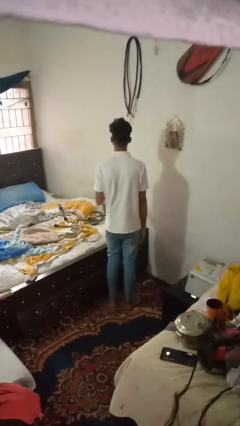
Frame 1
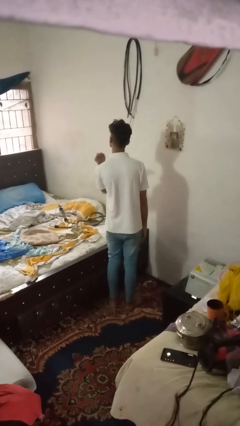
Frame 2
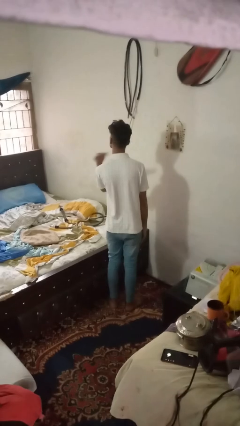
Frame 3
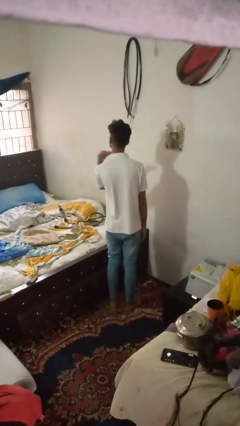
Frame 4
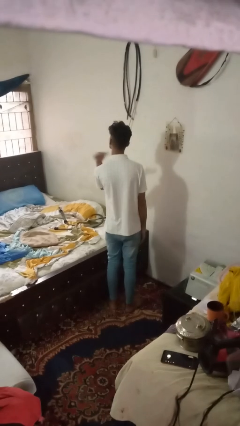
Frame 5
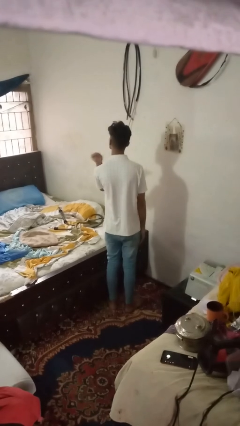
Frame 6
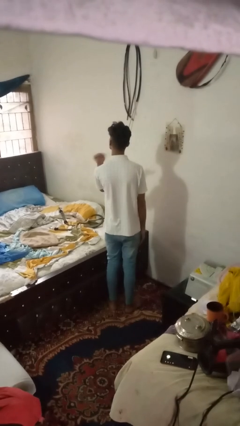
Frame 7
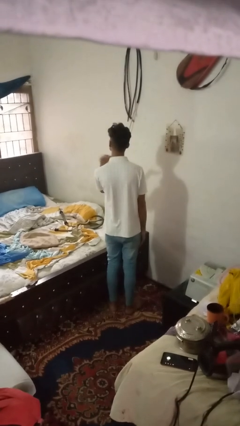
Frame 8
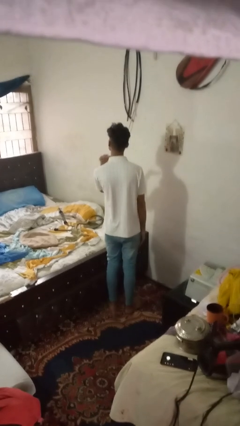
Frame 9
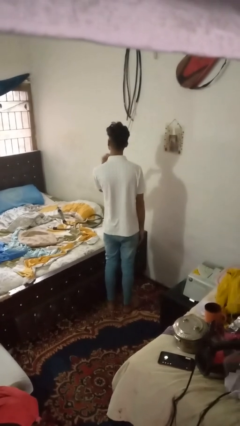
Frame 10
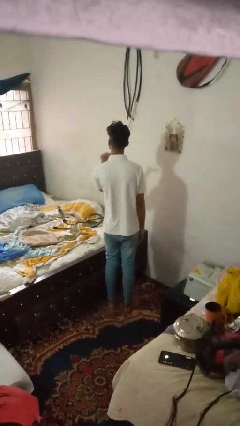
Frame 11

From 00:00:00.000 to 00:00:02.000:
person gestures cut

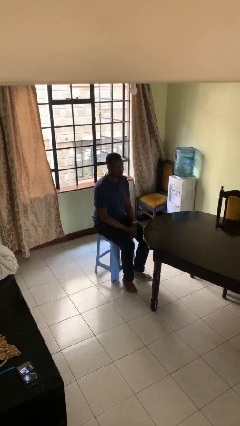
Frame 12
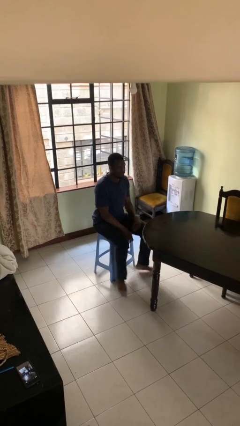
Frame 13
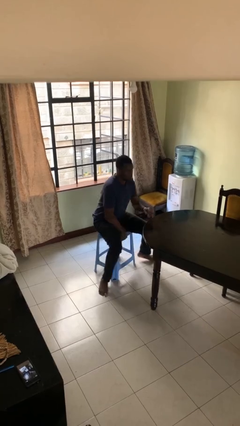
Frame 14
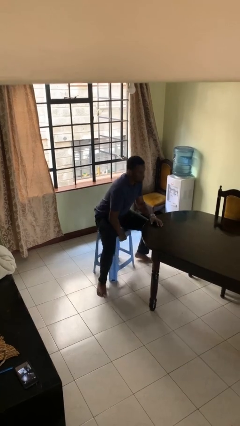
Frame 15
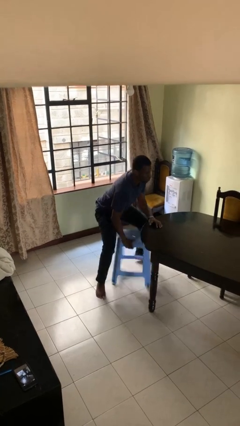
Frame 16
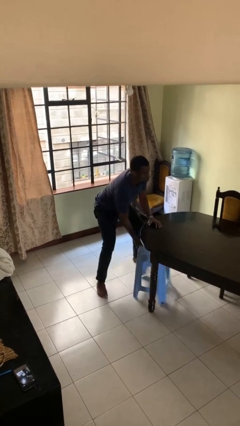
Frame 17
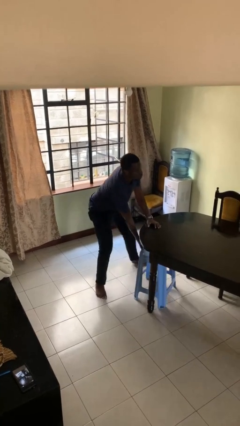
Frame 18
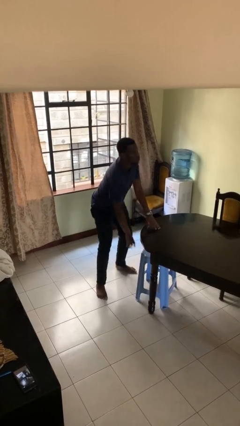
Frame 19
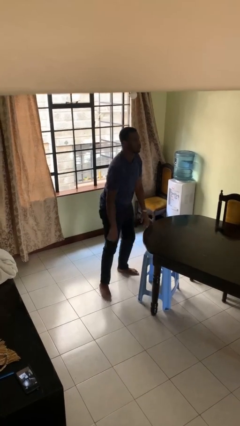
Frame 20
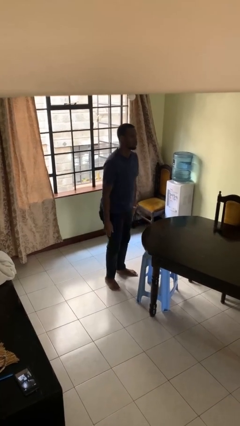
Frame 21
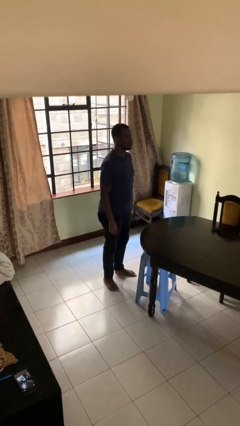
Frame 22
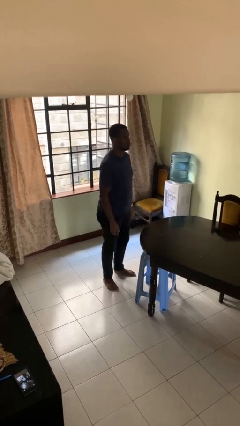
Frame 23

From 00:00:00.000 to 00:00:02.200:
person stands up

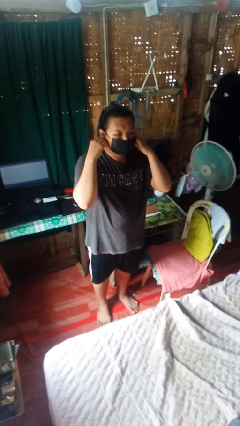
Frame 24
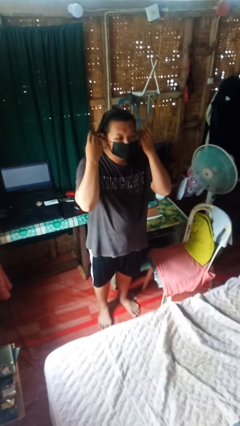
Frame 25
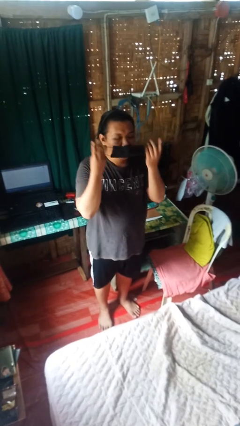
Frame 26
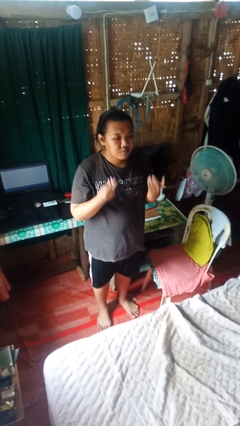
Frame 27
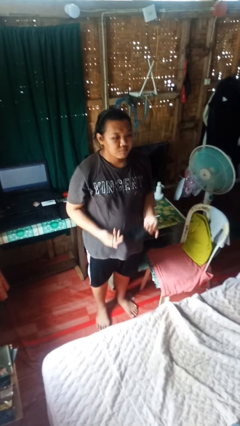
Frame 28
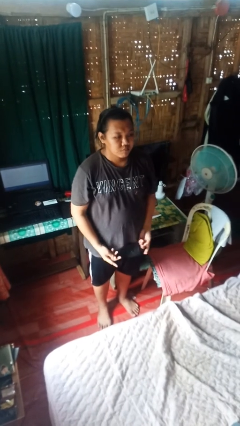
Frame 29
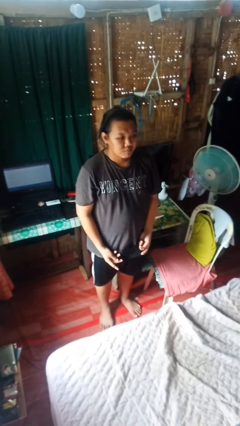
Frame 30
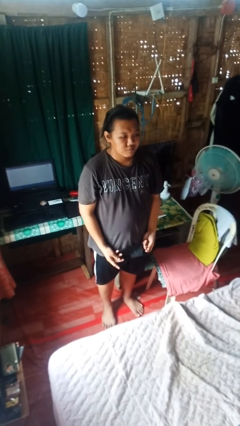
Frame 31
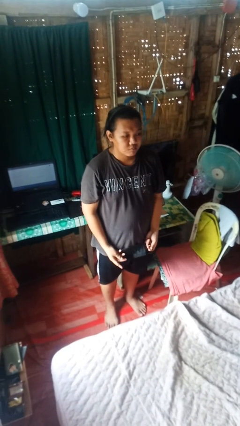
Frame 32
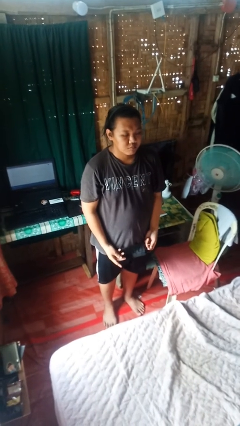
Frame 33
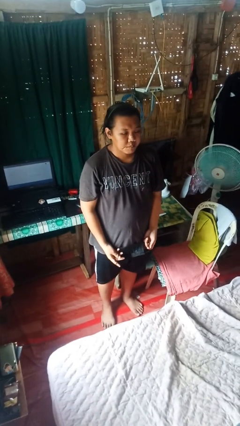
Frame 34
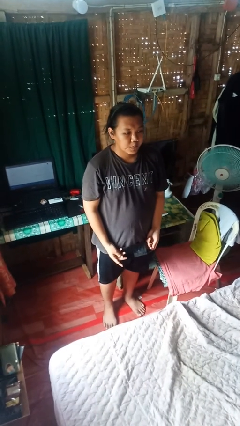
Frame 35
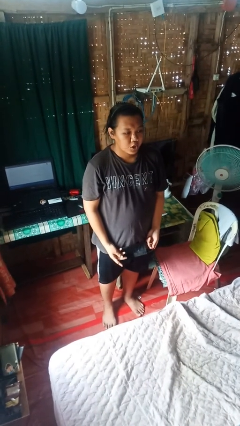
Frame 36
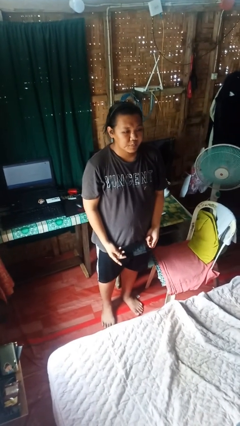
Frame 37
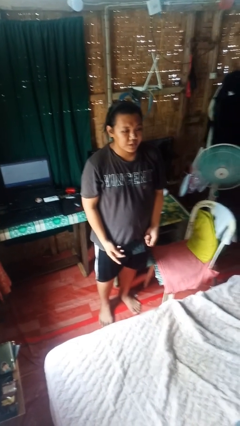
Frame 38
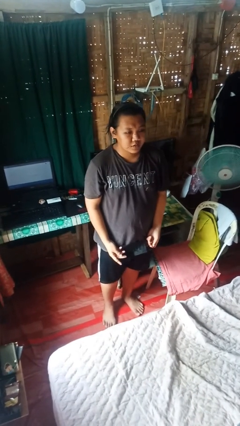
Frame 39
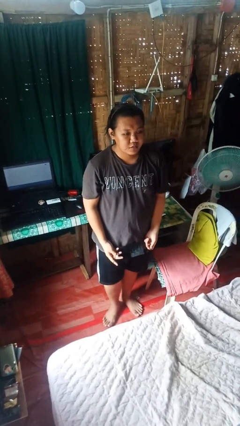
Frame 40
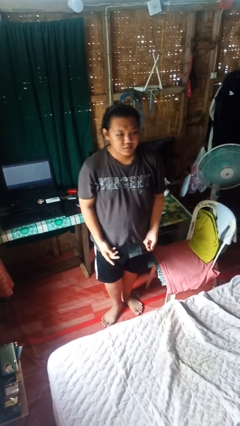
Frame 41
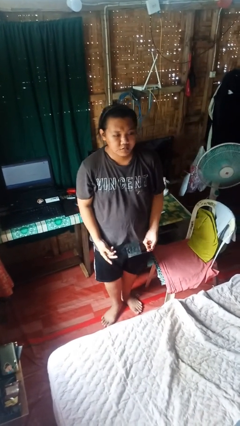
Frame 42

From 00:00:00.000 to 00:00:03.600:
person takes off facemask

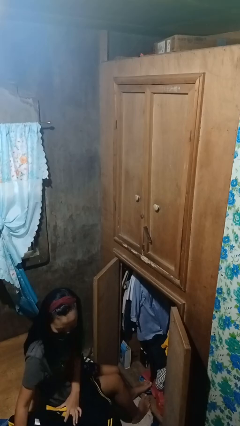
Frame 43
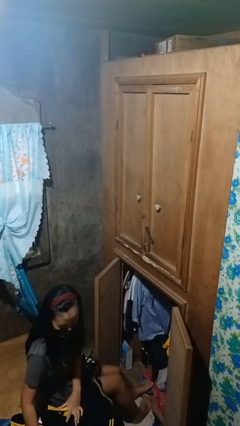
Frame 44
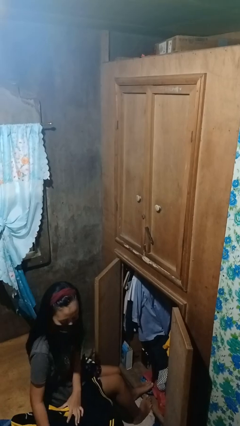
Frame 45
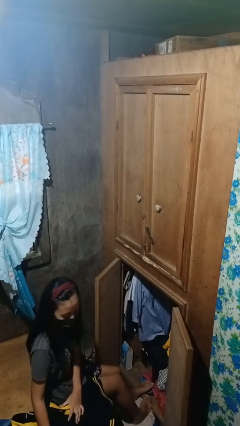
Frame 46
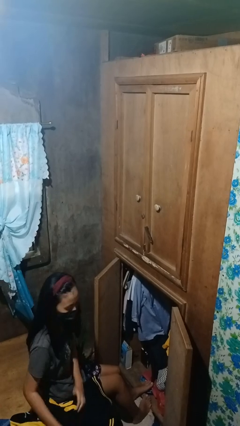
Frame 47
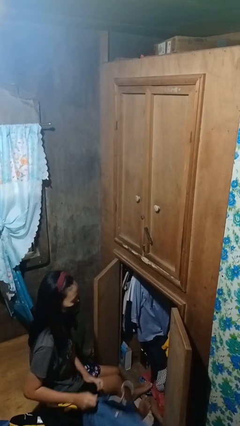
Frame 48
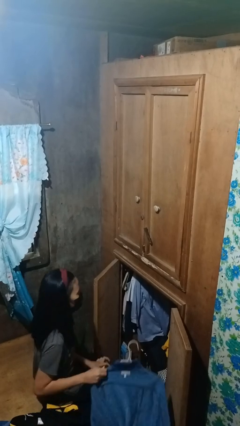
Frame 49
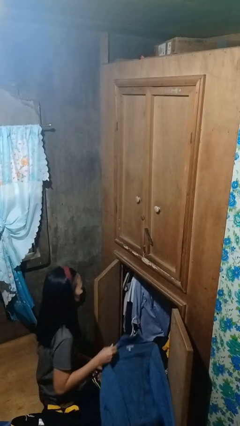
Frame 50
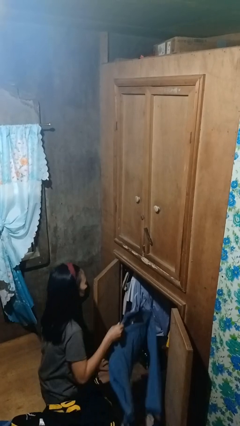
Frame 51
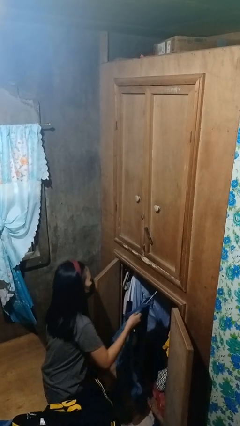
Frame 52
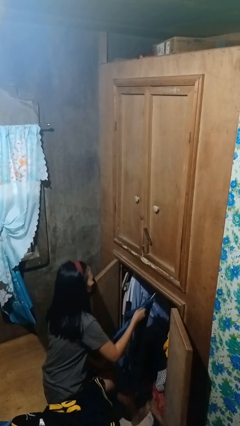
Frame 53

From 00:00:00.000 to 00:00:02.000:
person puts clothes into closet

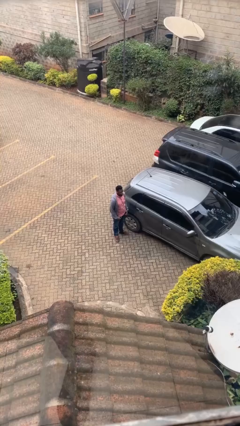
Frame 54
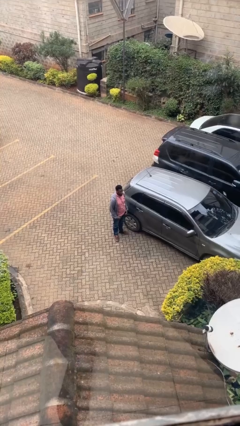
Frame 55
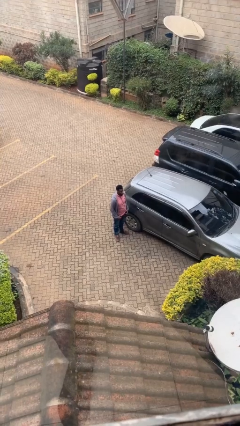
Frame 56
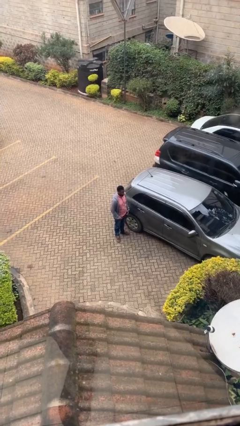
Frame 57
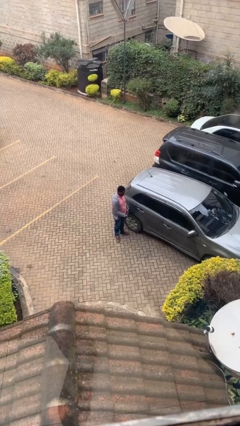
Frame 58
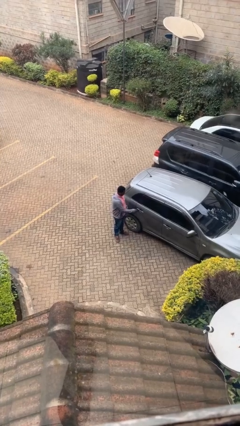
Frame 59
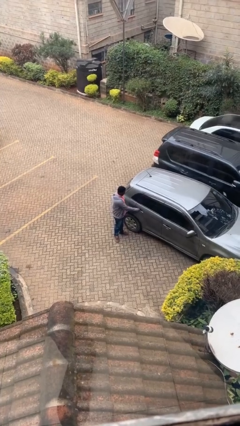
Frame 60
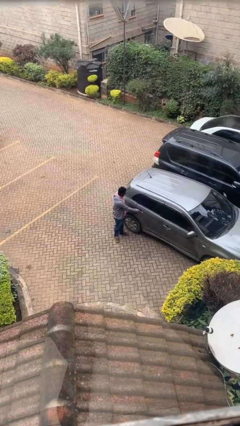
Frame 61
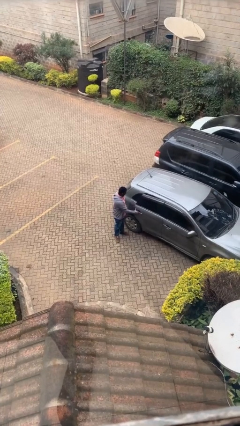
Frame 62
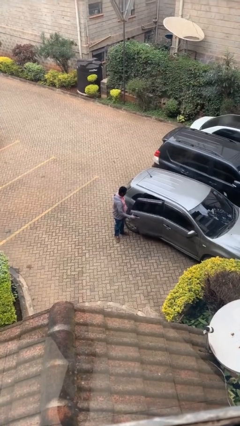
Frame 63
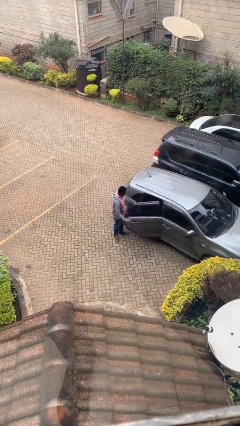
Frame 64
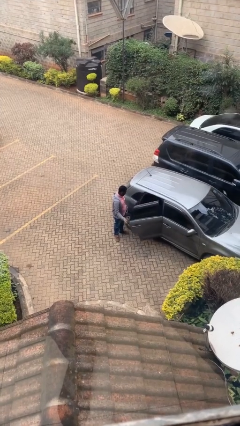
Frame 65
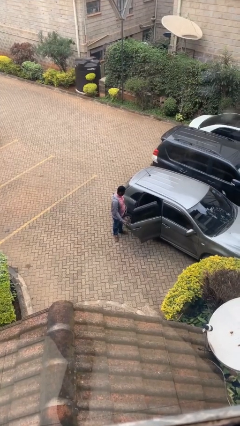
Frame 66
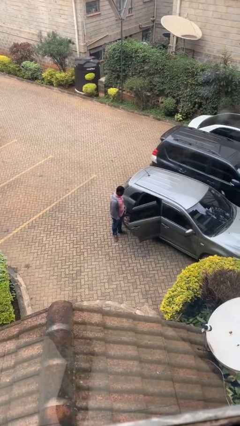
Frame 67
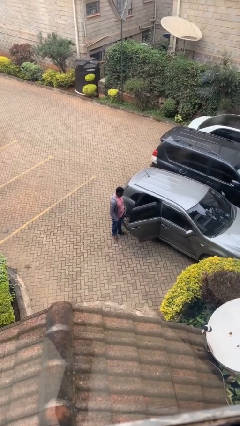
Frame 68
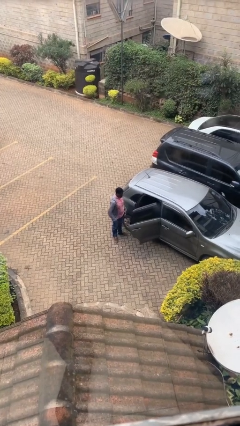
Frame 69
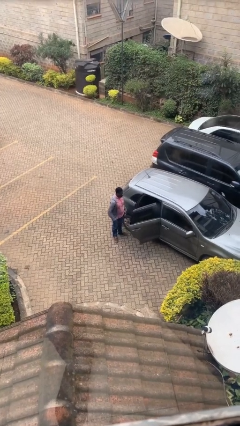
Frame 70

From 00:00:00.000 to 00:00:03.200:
person opens car door

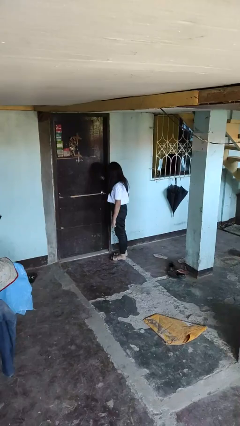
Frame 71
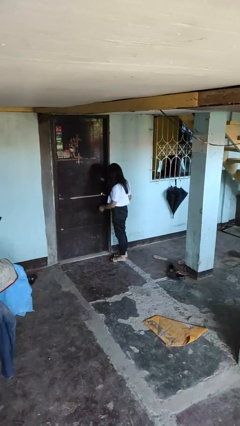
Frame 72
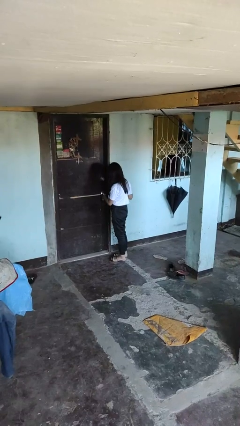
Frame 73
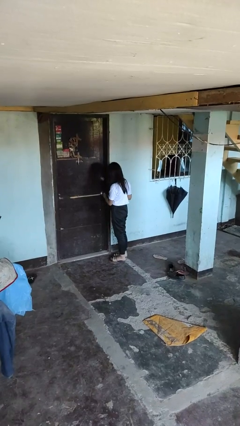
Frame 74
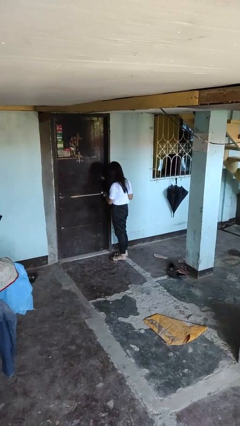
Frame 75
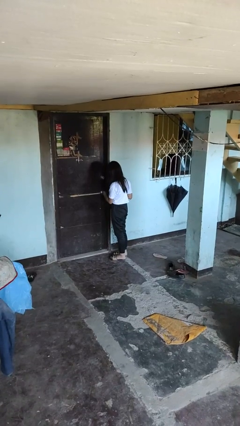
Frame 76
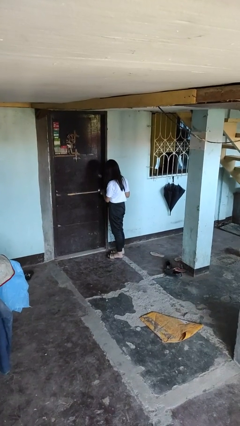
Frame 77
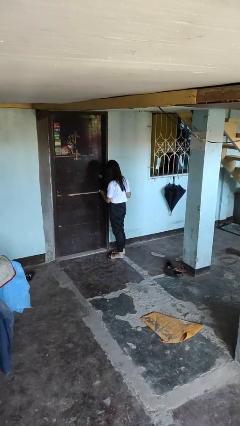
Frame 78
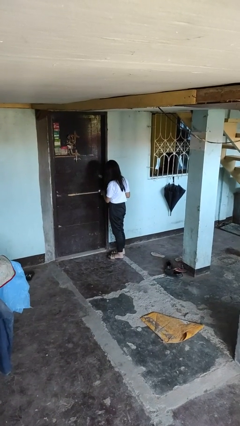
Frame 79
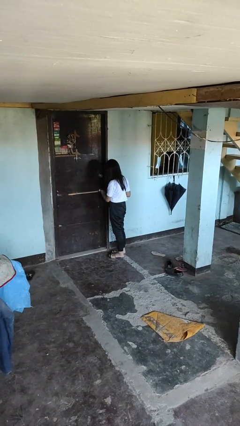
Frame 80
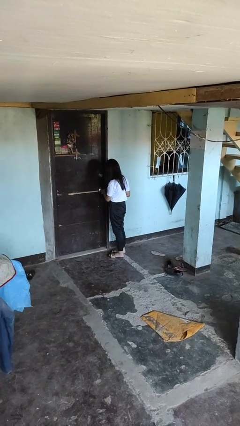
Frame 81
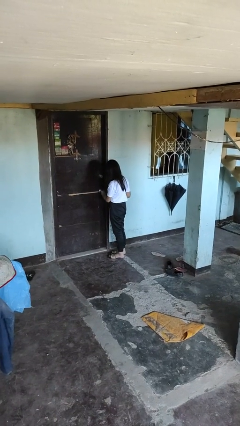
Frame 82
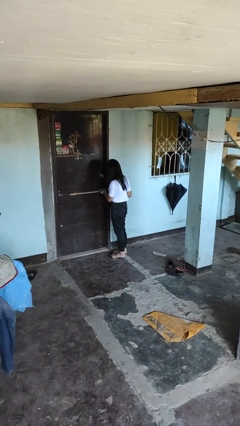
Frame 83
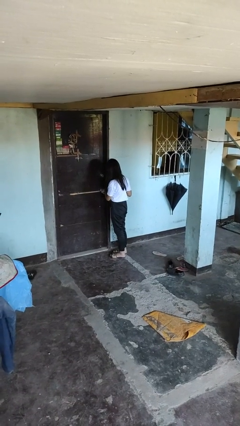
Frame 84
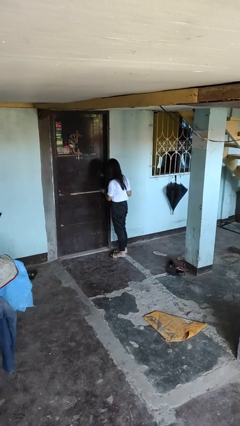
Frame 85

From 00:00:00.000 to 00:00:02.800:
person unlocks door with keys

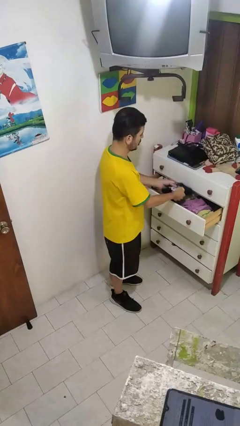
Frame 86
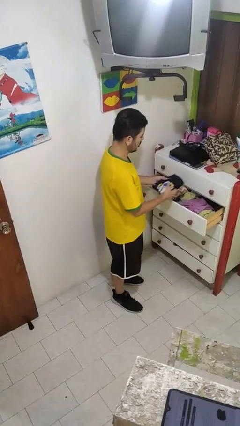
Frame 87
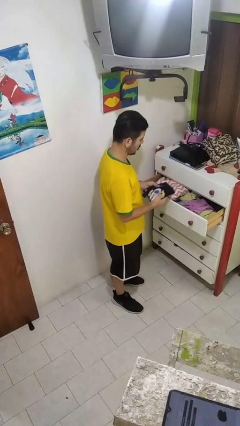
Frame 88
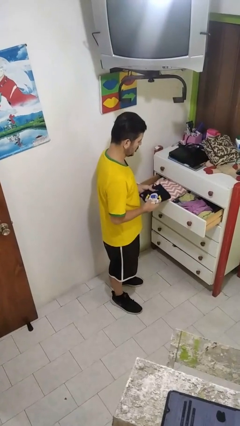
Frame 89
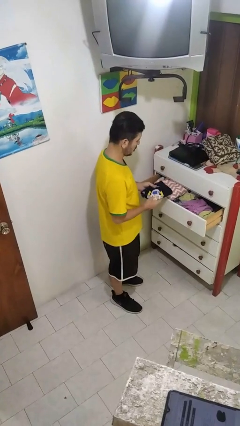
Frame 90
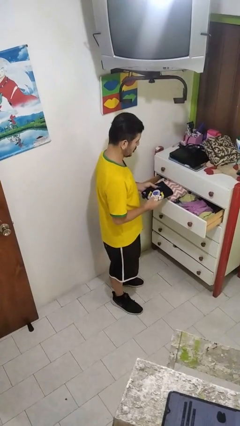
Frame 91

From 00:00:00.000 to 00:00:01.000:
person takes clothes from dresser

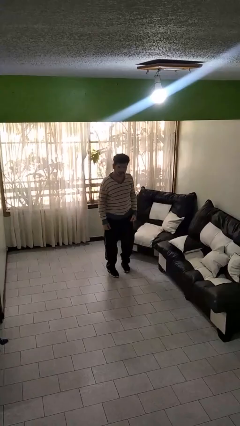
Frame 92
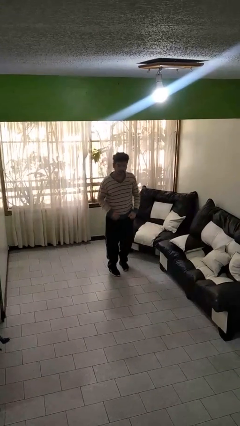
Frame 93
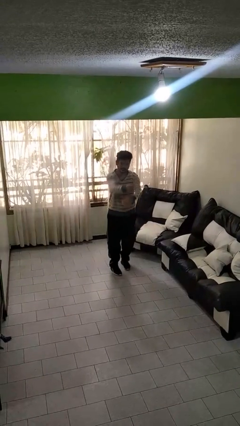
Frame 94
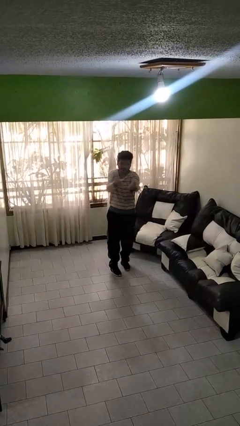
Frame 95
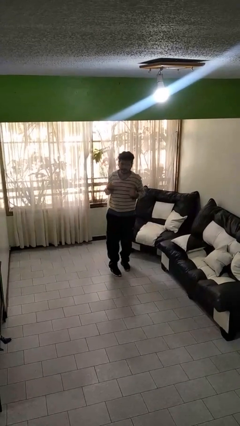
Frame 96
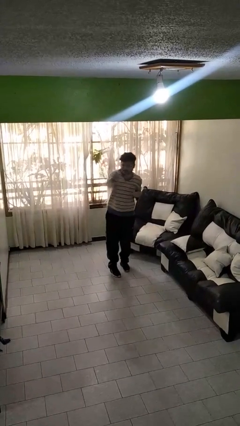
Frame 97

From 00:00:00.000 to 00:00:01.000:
person karate chop
